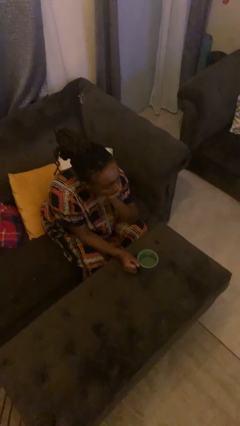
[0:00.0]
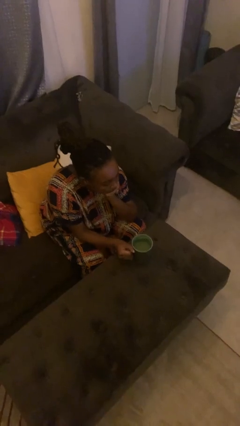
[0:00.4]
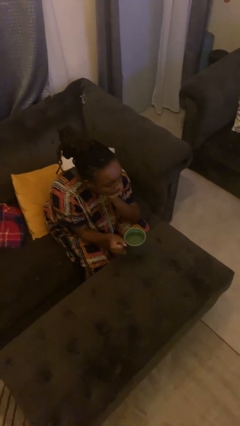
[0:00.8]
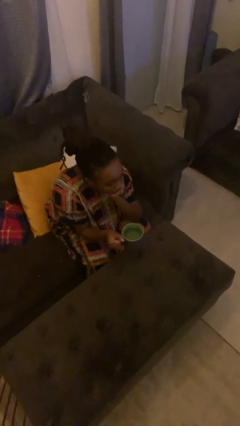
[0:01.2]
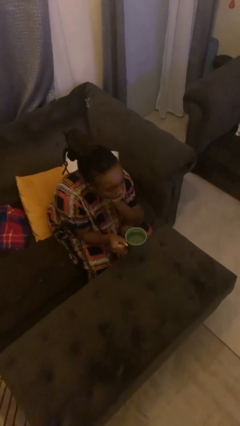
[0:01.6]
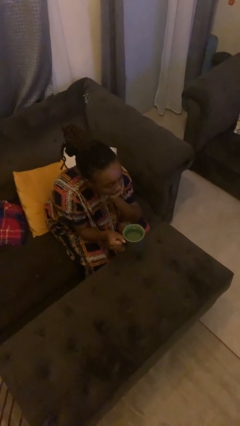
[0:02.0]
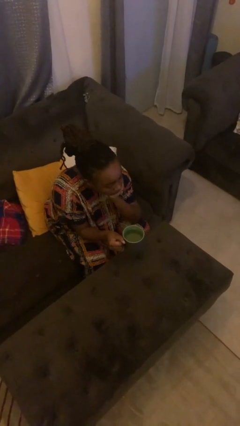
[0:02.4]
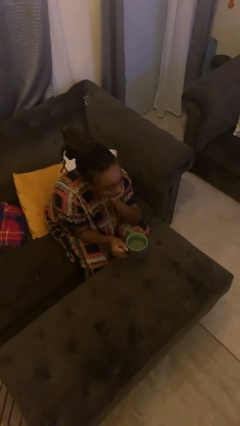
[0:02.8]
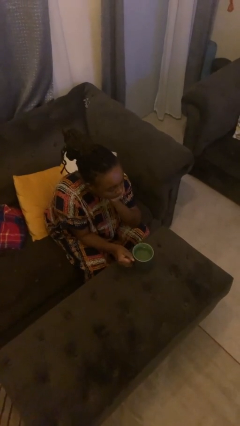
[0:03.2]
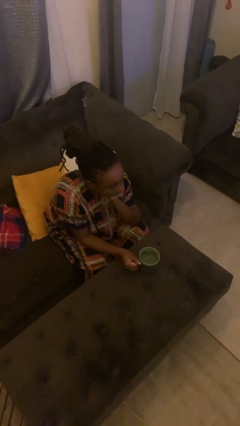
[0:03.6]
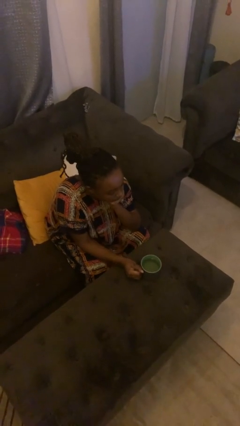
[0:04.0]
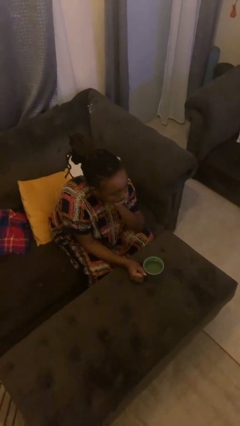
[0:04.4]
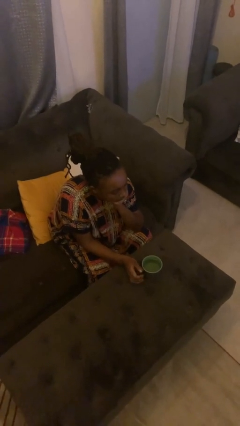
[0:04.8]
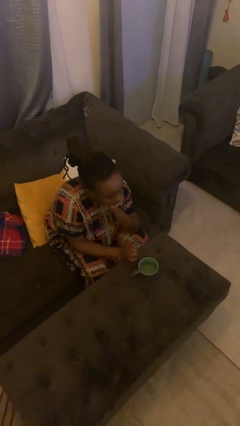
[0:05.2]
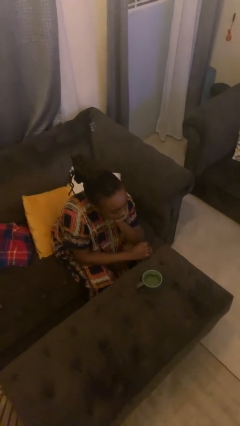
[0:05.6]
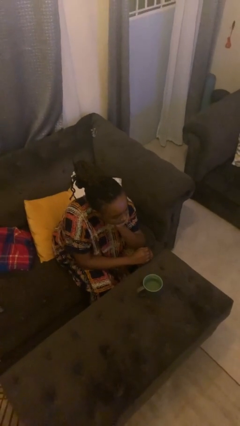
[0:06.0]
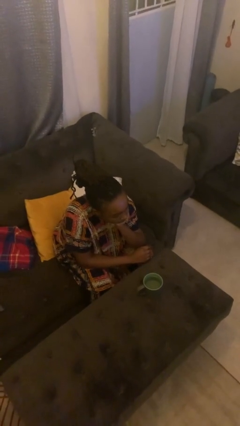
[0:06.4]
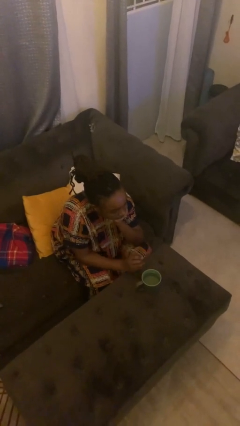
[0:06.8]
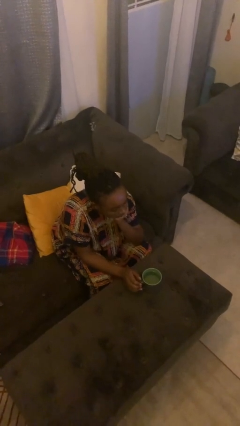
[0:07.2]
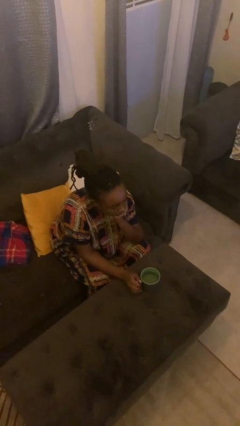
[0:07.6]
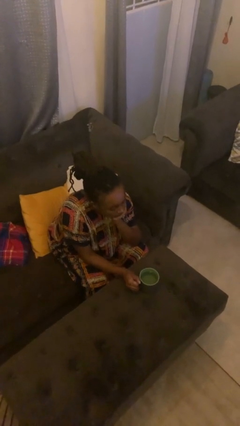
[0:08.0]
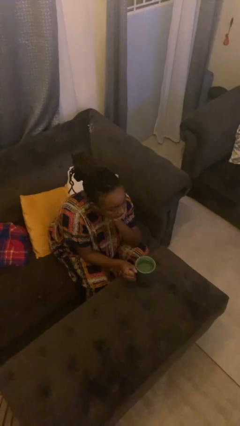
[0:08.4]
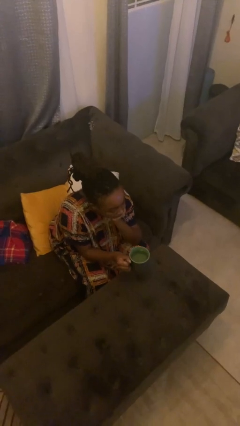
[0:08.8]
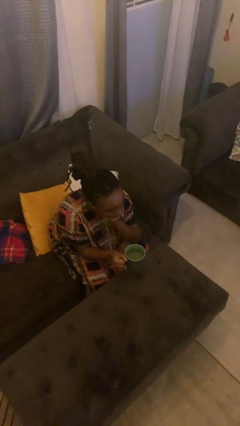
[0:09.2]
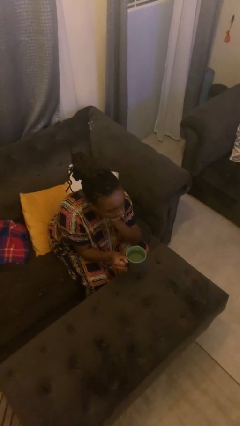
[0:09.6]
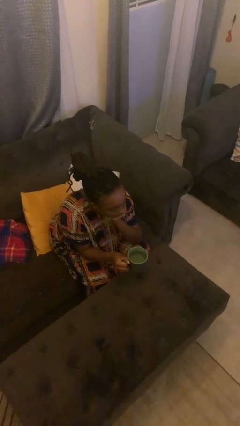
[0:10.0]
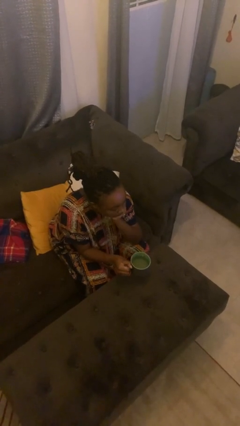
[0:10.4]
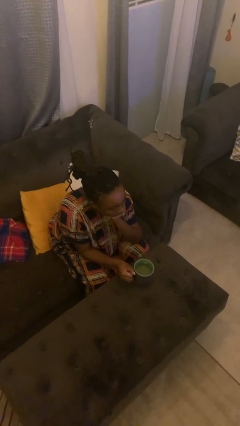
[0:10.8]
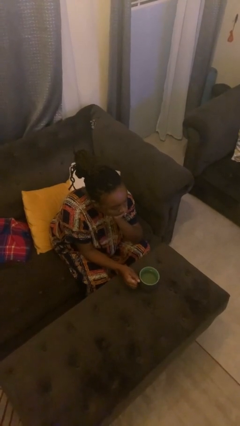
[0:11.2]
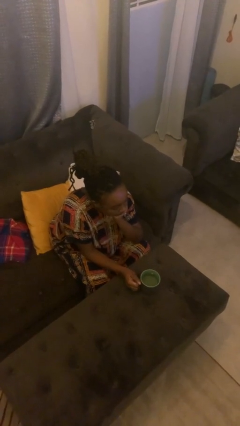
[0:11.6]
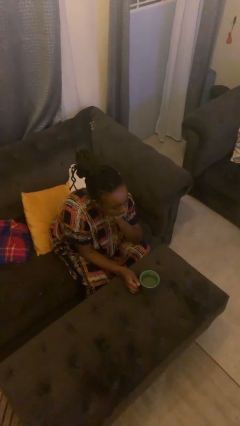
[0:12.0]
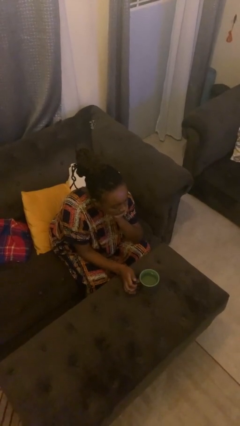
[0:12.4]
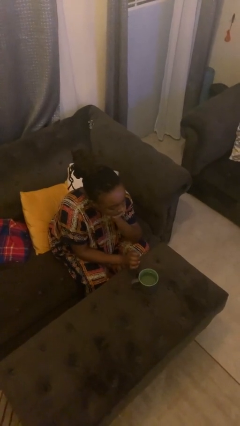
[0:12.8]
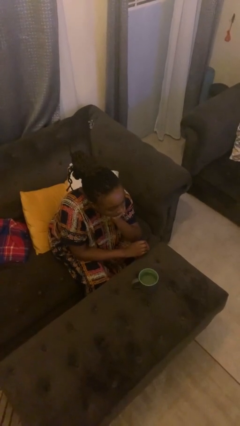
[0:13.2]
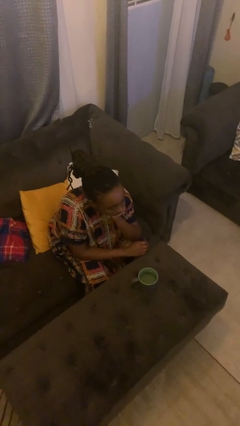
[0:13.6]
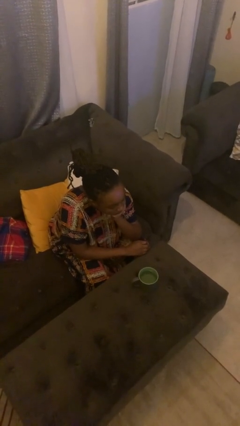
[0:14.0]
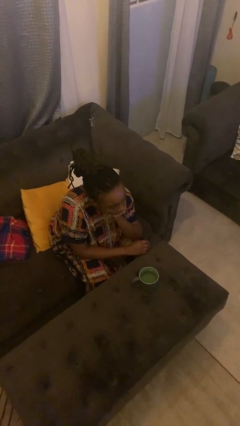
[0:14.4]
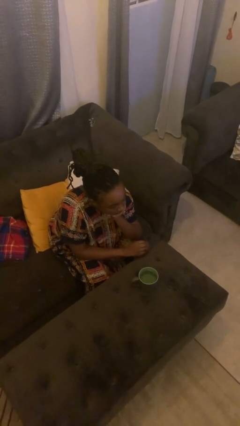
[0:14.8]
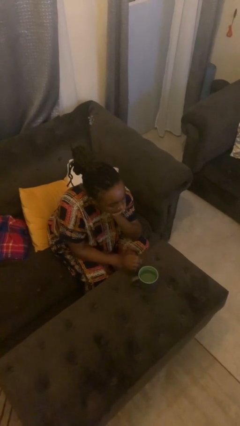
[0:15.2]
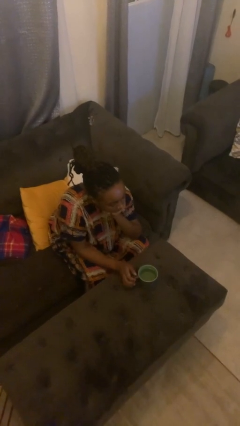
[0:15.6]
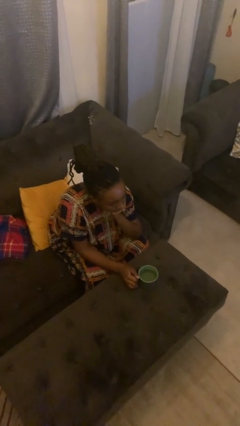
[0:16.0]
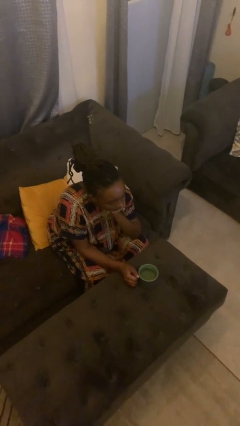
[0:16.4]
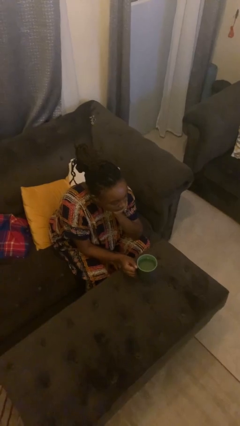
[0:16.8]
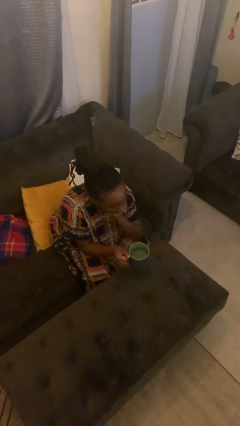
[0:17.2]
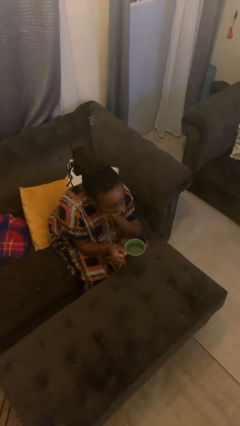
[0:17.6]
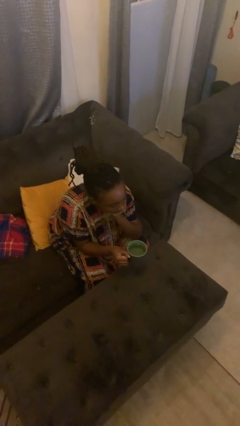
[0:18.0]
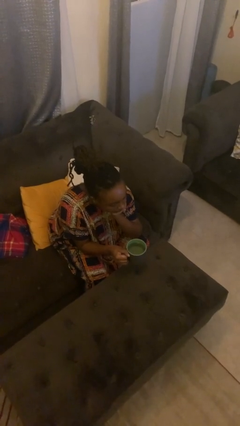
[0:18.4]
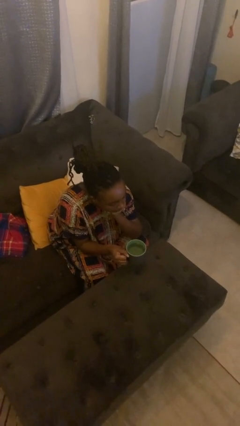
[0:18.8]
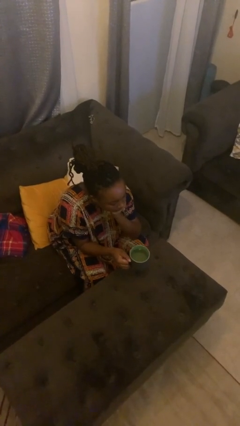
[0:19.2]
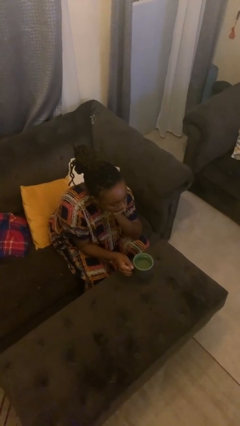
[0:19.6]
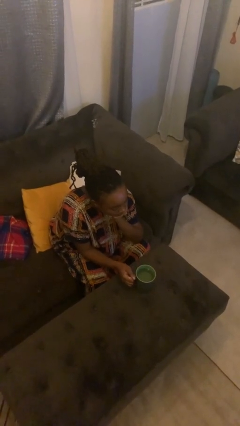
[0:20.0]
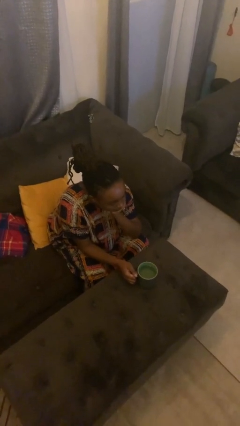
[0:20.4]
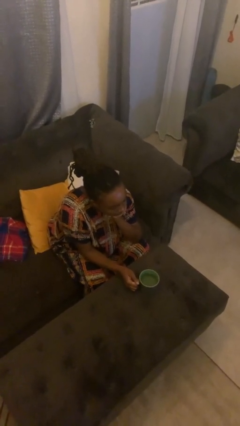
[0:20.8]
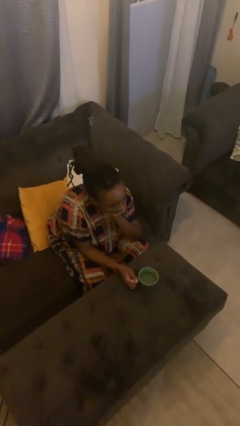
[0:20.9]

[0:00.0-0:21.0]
person picks up object from table

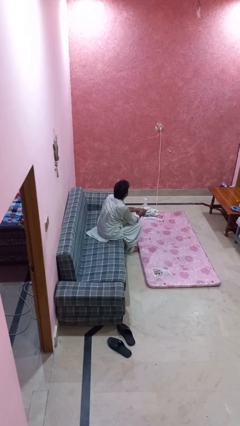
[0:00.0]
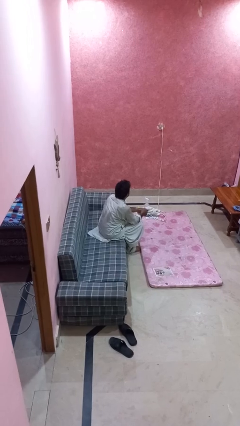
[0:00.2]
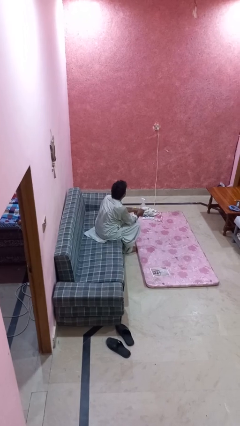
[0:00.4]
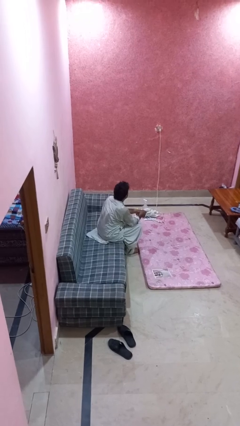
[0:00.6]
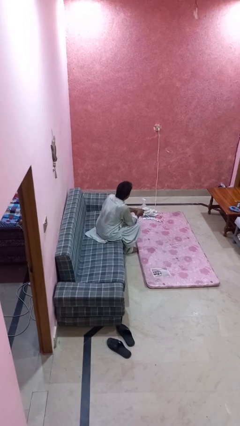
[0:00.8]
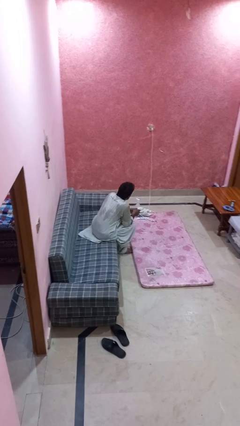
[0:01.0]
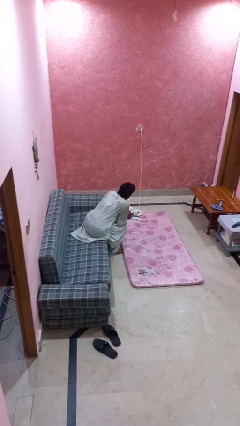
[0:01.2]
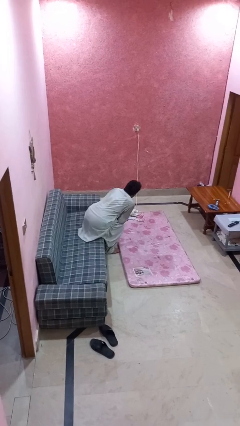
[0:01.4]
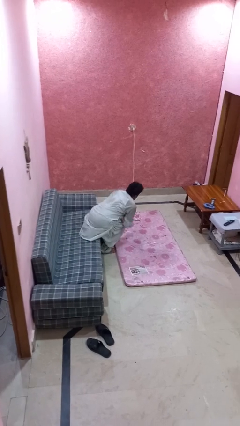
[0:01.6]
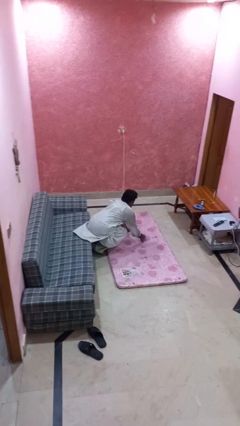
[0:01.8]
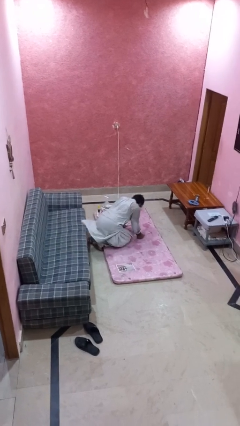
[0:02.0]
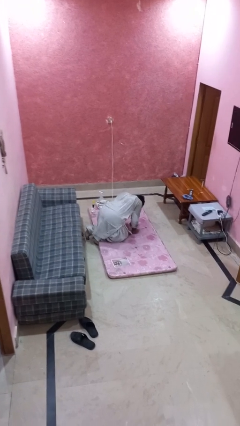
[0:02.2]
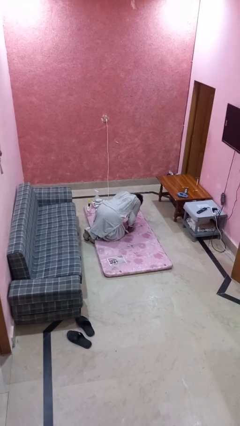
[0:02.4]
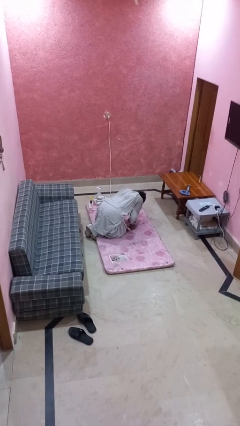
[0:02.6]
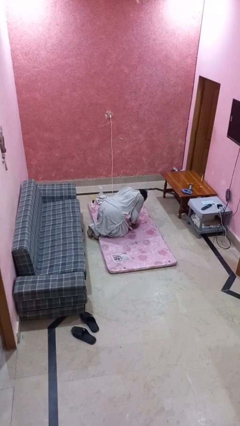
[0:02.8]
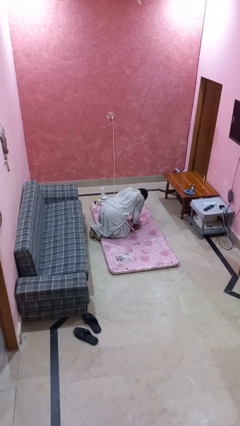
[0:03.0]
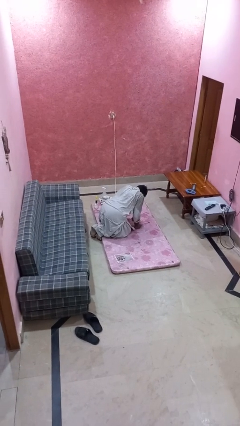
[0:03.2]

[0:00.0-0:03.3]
person falls from chair

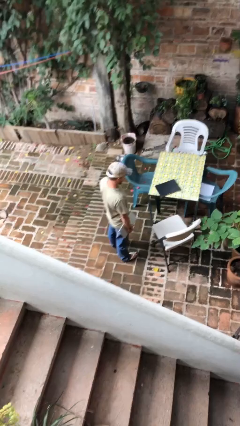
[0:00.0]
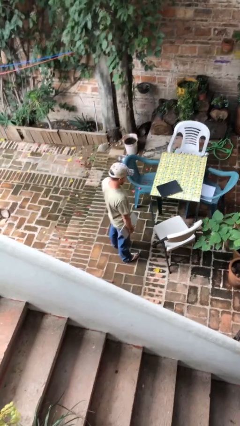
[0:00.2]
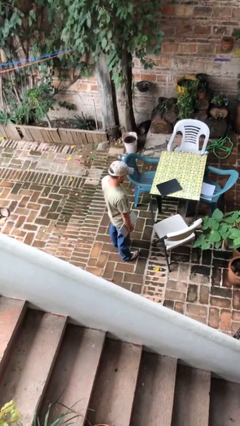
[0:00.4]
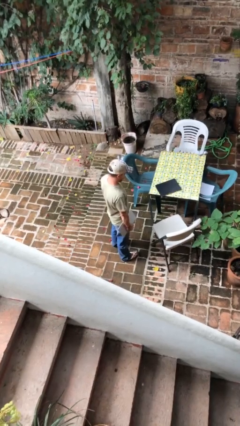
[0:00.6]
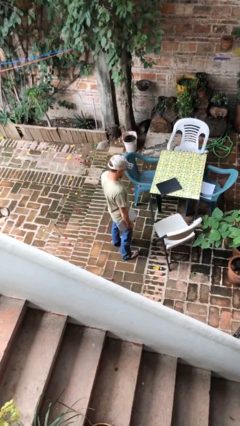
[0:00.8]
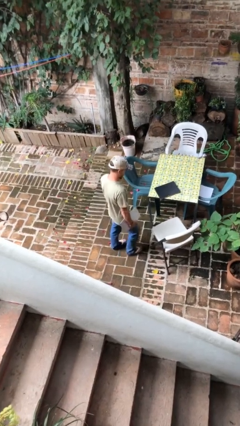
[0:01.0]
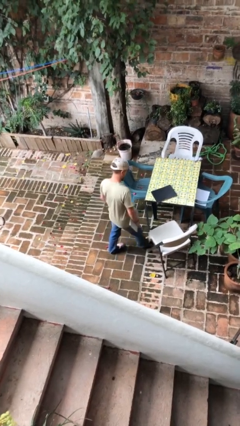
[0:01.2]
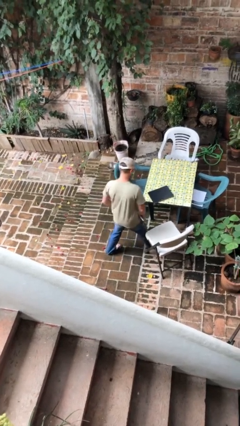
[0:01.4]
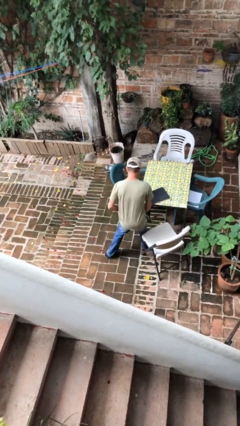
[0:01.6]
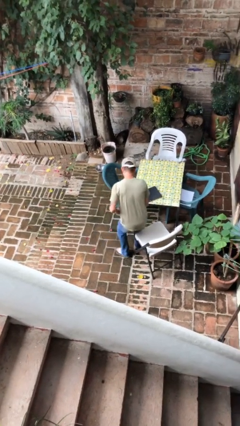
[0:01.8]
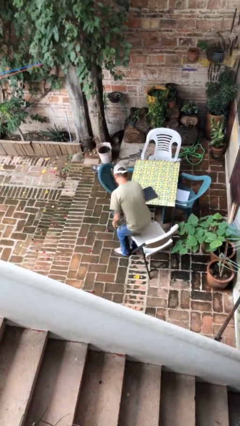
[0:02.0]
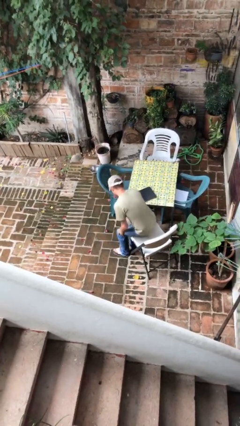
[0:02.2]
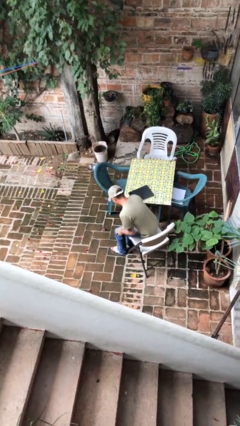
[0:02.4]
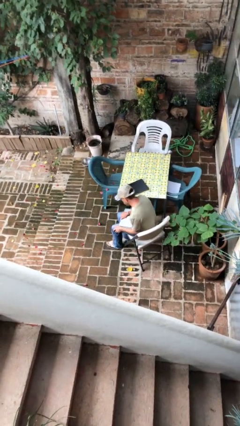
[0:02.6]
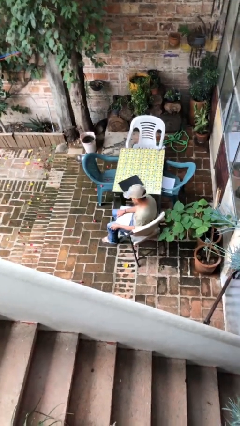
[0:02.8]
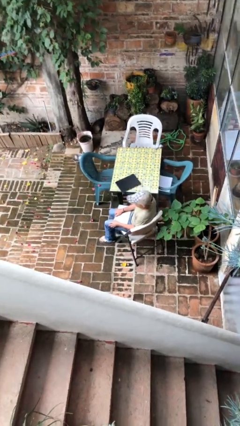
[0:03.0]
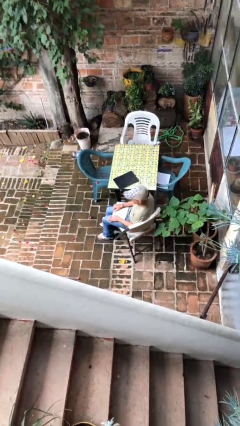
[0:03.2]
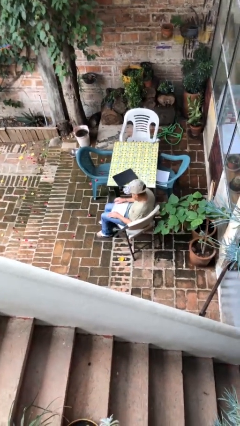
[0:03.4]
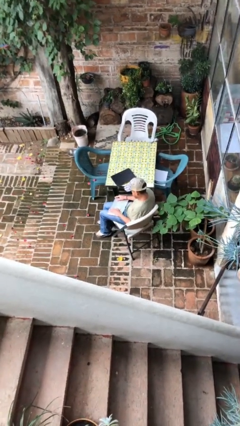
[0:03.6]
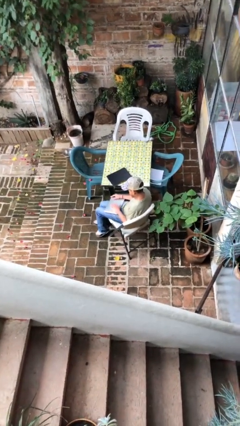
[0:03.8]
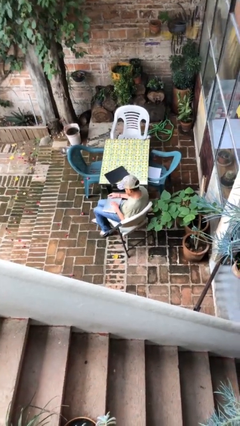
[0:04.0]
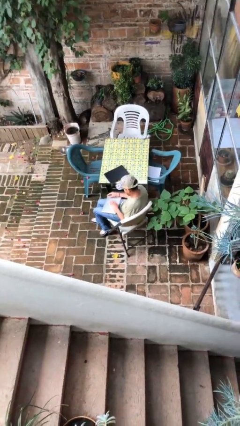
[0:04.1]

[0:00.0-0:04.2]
person sits down
